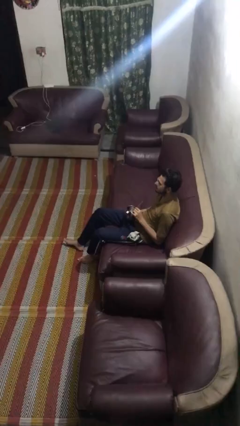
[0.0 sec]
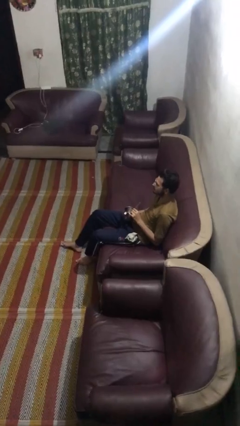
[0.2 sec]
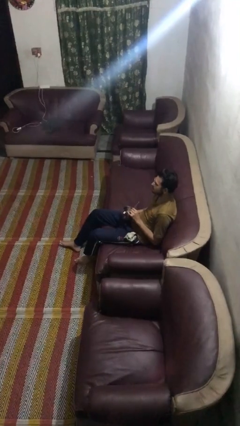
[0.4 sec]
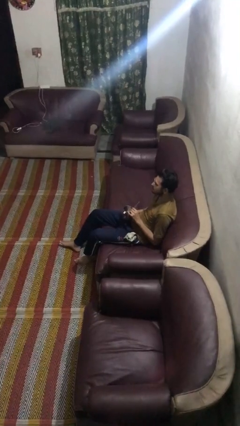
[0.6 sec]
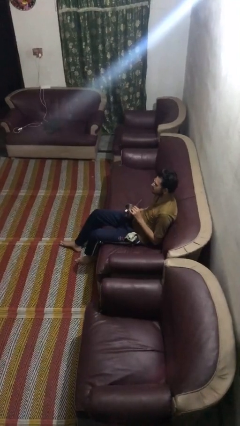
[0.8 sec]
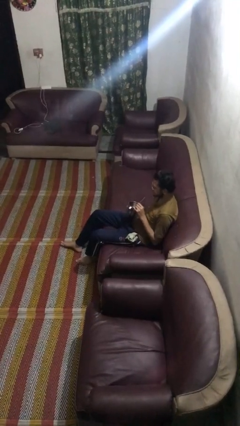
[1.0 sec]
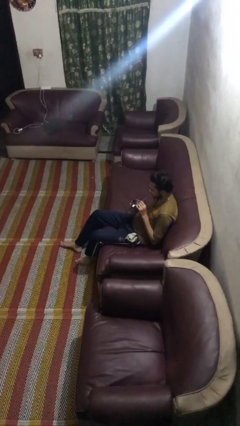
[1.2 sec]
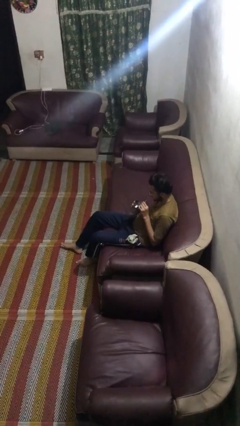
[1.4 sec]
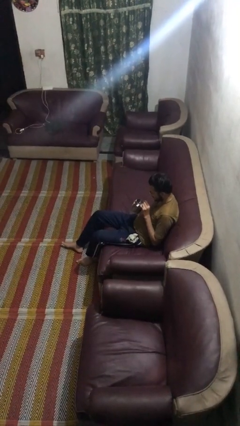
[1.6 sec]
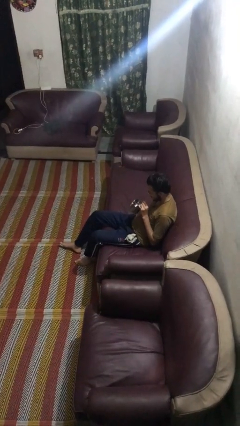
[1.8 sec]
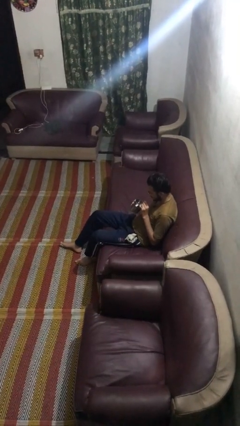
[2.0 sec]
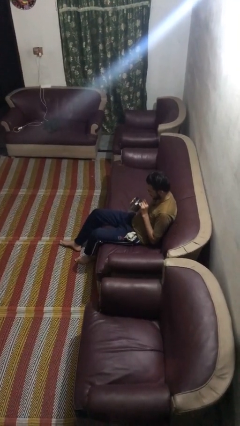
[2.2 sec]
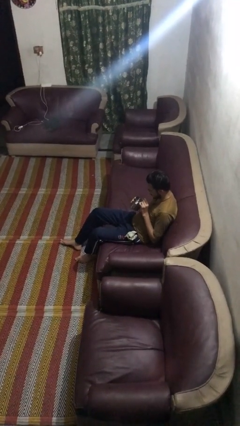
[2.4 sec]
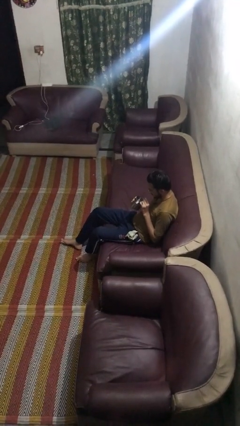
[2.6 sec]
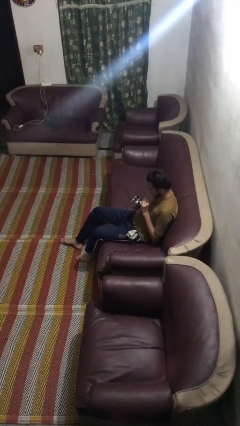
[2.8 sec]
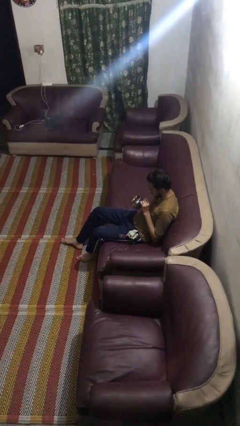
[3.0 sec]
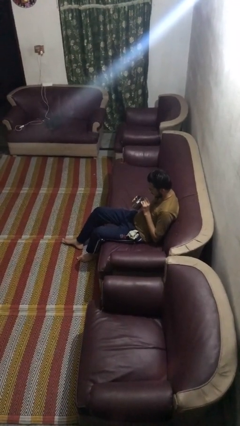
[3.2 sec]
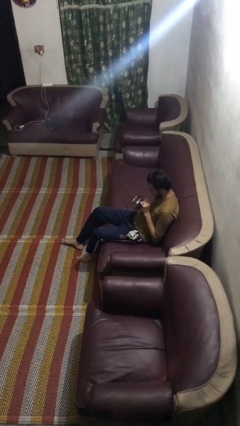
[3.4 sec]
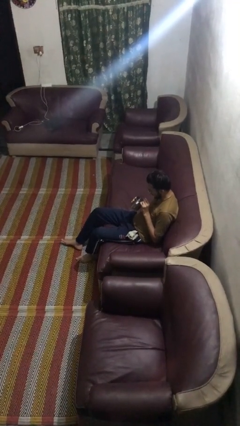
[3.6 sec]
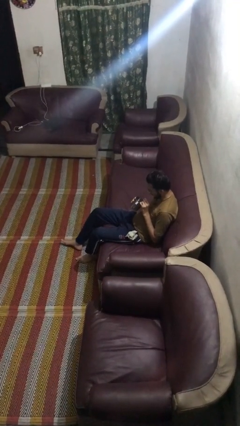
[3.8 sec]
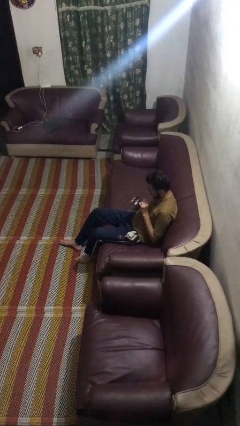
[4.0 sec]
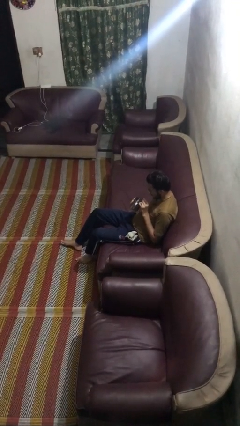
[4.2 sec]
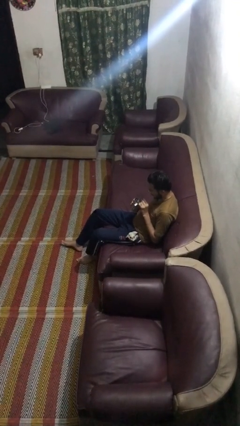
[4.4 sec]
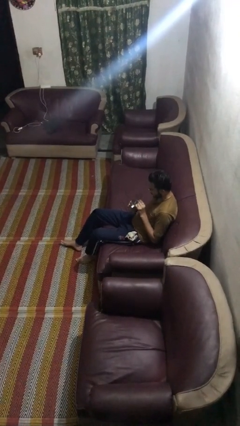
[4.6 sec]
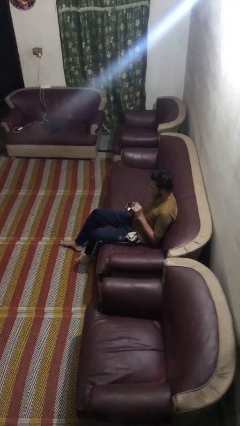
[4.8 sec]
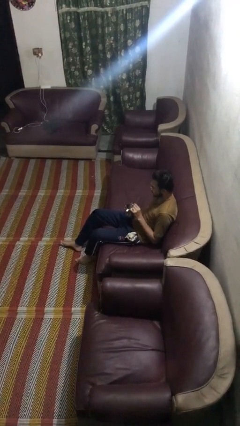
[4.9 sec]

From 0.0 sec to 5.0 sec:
person drinks from straw

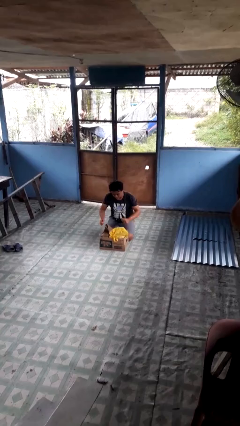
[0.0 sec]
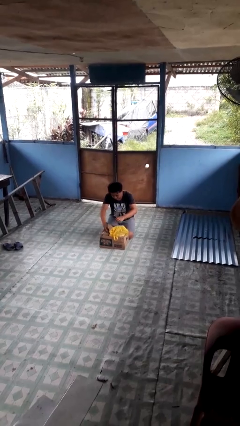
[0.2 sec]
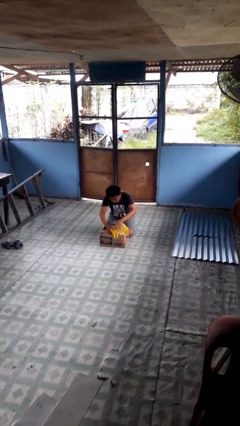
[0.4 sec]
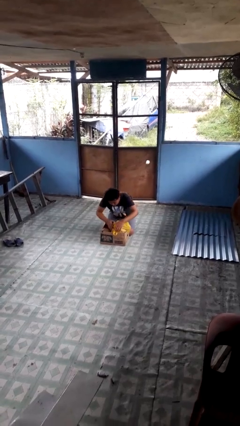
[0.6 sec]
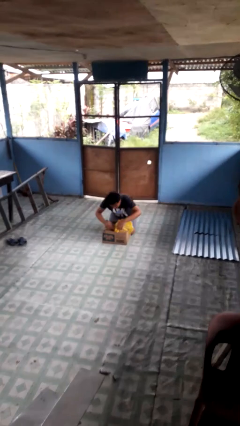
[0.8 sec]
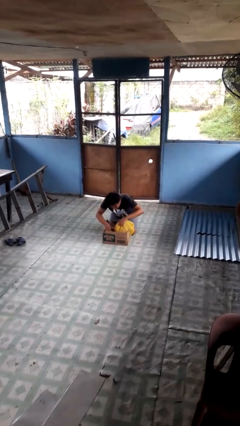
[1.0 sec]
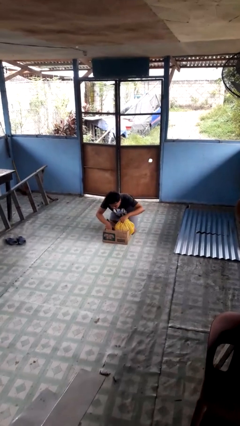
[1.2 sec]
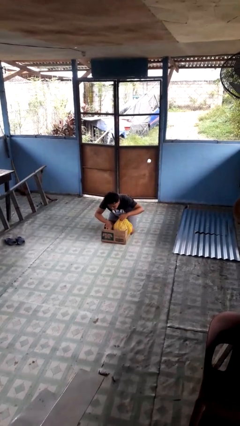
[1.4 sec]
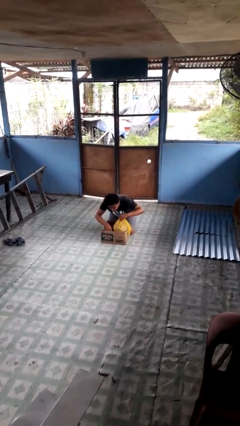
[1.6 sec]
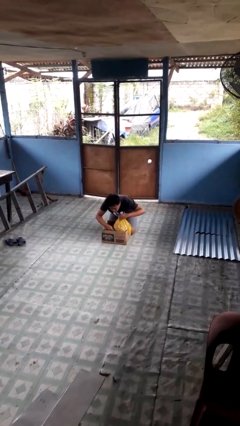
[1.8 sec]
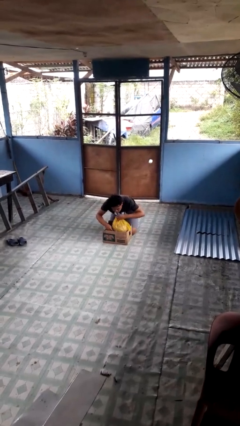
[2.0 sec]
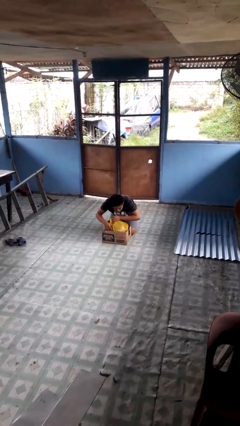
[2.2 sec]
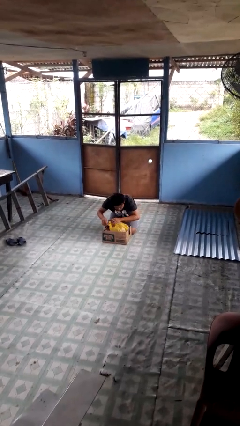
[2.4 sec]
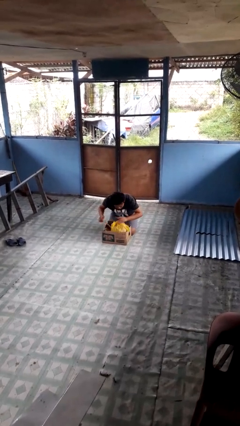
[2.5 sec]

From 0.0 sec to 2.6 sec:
person searches in box

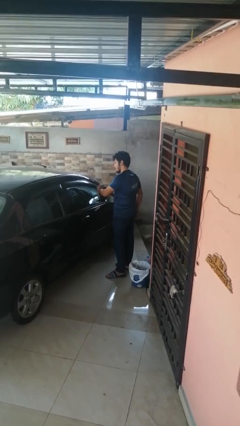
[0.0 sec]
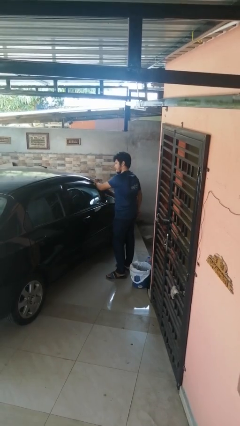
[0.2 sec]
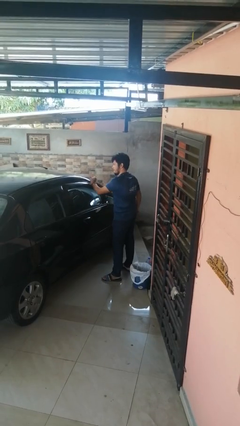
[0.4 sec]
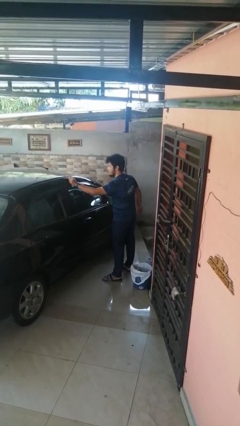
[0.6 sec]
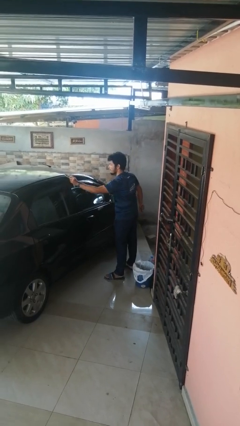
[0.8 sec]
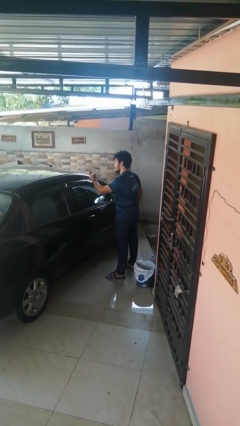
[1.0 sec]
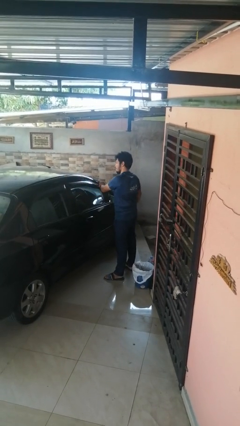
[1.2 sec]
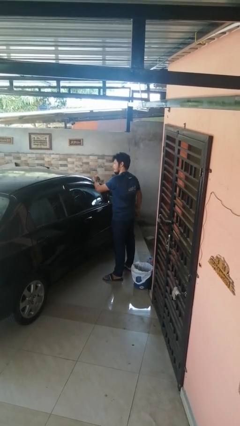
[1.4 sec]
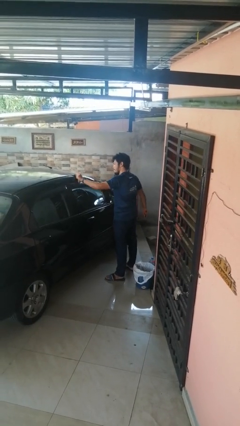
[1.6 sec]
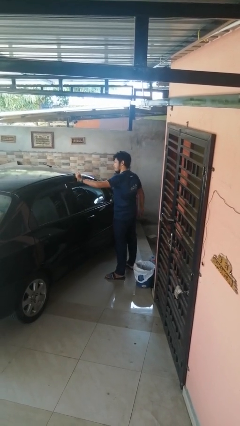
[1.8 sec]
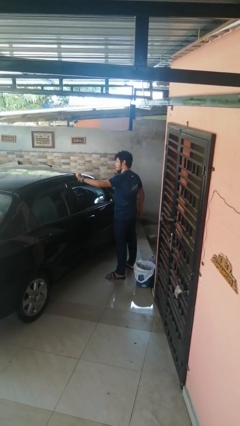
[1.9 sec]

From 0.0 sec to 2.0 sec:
person polishes car with rag

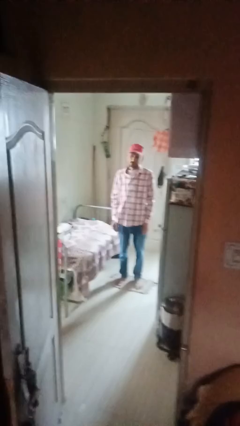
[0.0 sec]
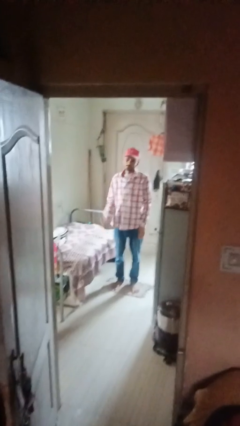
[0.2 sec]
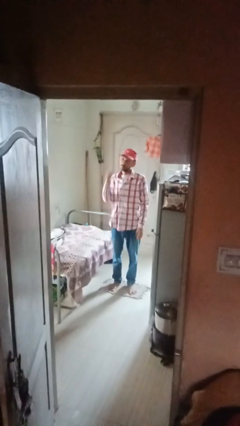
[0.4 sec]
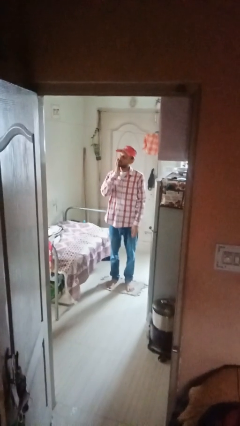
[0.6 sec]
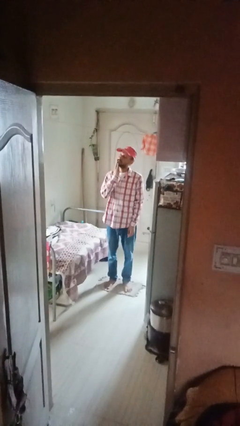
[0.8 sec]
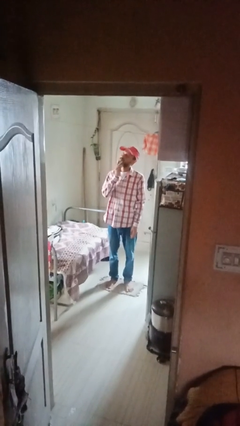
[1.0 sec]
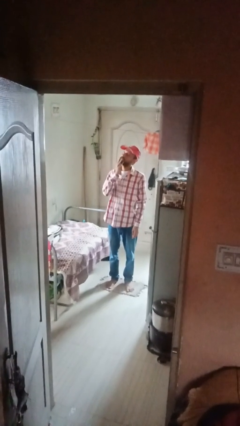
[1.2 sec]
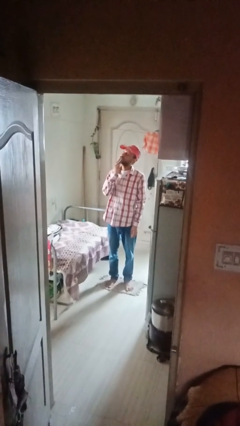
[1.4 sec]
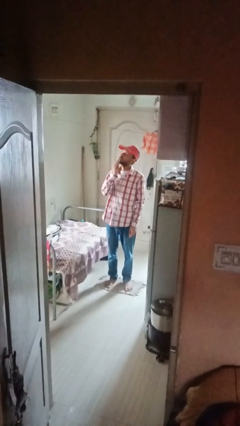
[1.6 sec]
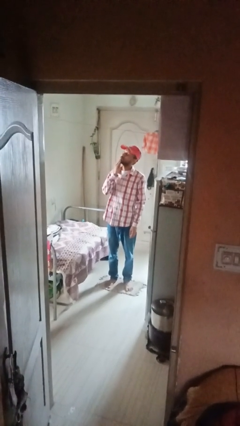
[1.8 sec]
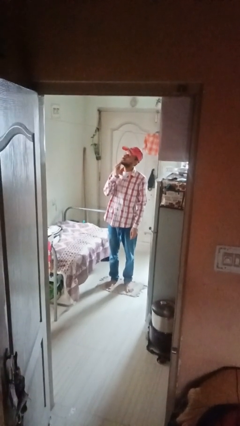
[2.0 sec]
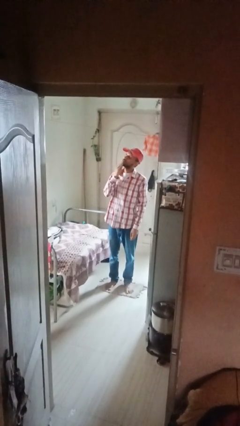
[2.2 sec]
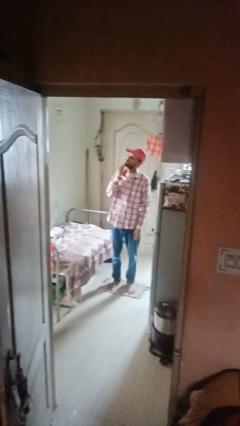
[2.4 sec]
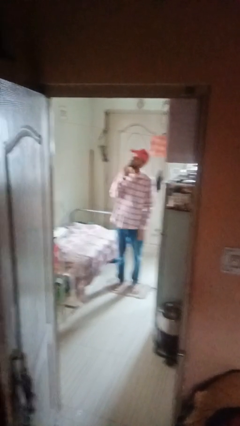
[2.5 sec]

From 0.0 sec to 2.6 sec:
person strokes chin

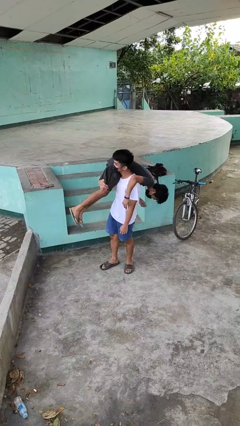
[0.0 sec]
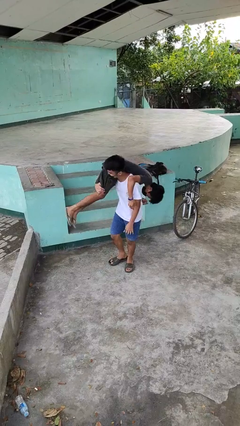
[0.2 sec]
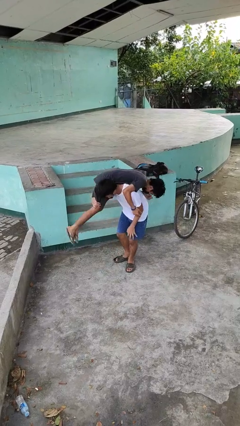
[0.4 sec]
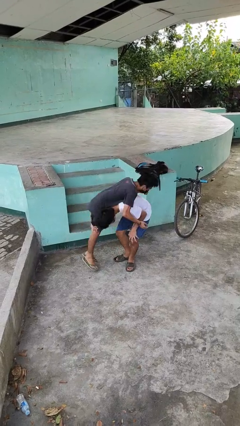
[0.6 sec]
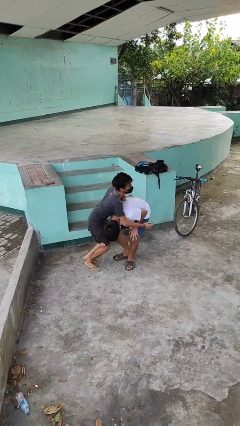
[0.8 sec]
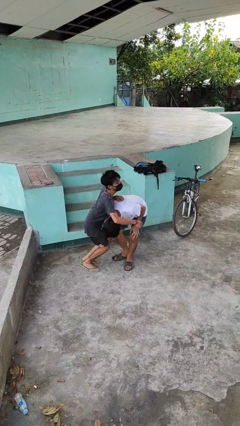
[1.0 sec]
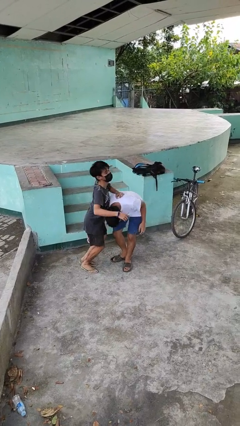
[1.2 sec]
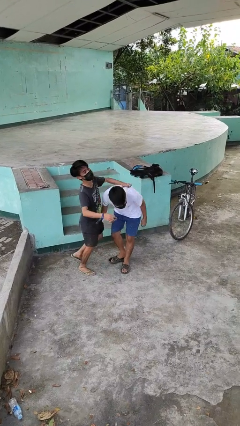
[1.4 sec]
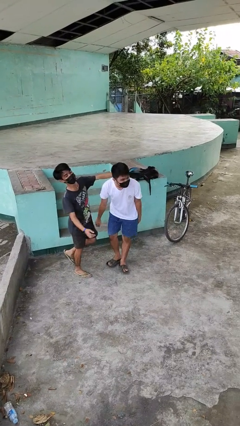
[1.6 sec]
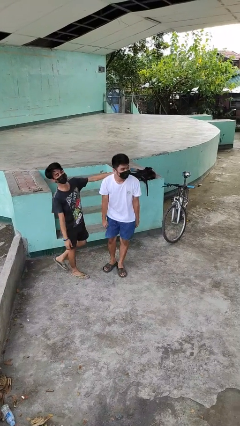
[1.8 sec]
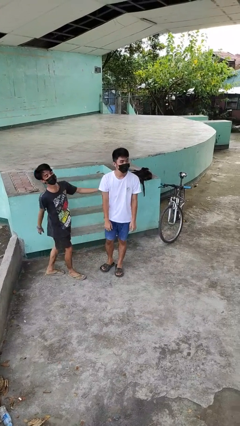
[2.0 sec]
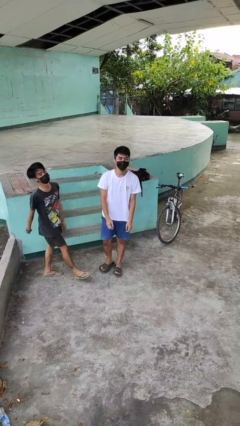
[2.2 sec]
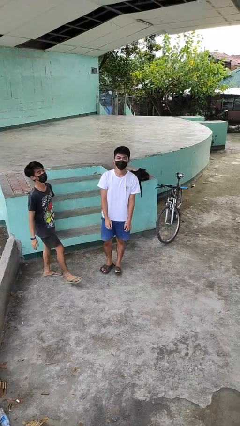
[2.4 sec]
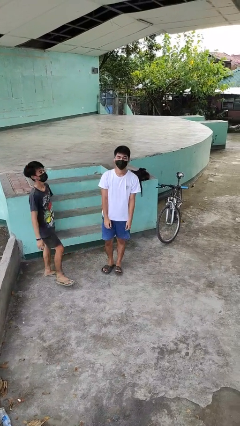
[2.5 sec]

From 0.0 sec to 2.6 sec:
person puts down person

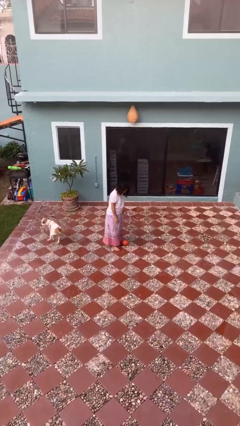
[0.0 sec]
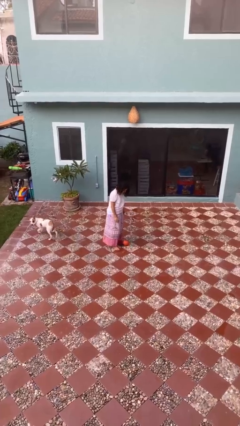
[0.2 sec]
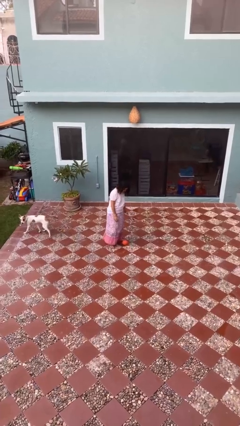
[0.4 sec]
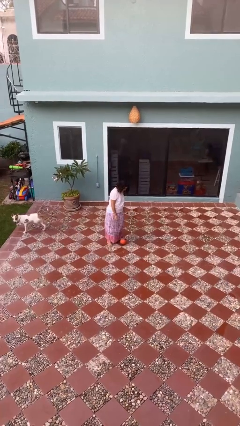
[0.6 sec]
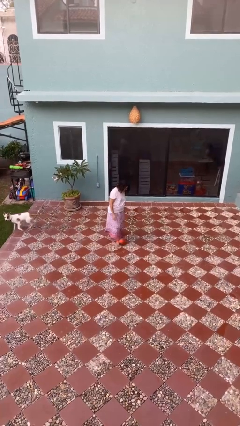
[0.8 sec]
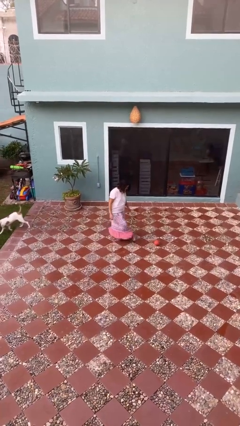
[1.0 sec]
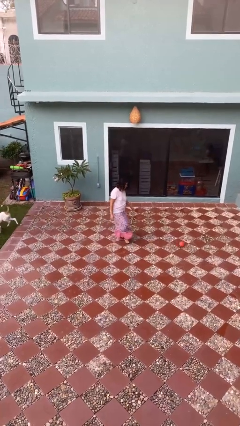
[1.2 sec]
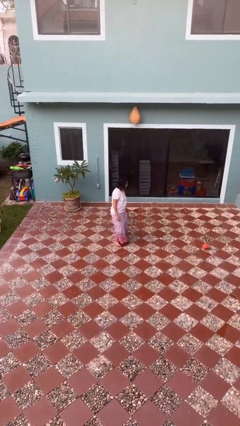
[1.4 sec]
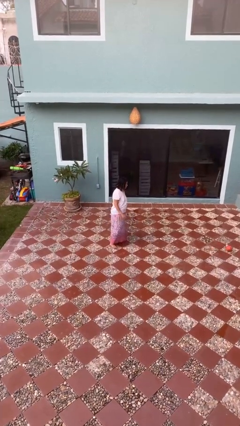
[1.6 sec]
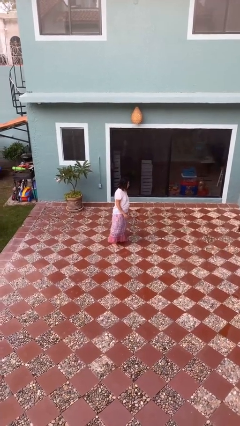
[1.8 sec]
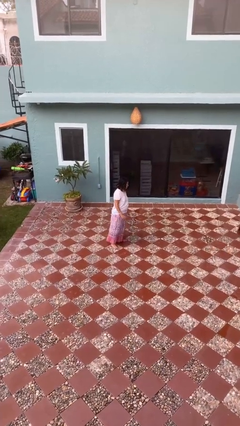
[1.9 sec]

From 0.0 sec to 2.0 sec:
person kicks object to person

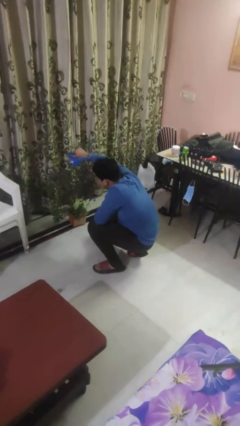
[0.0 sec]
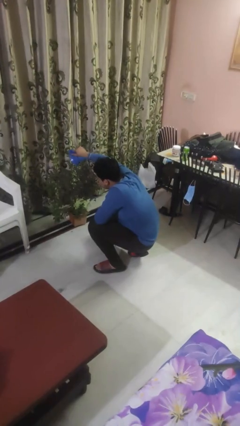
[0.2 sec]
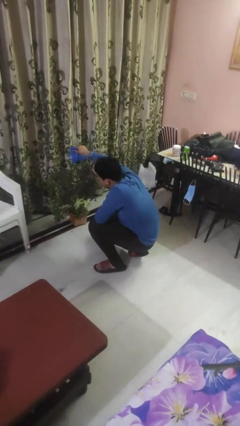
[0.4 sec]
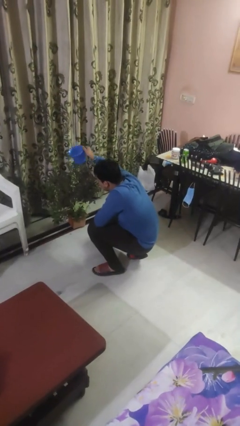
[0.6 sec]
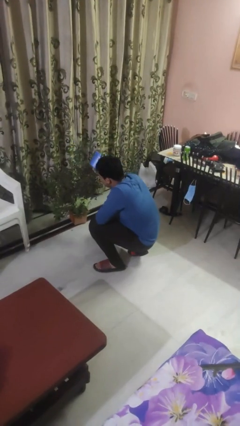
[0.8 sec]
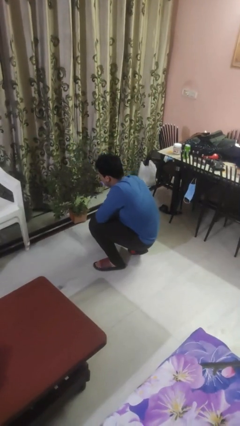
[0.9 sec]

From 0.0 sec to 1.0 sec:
person waters houseplant
